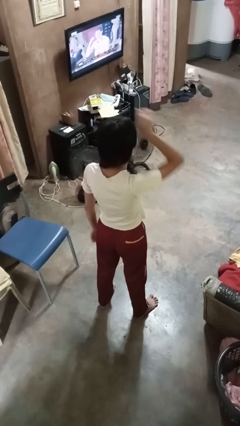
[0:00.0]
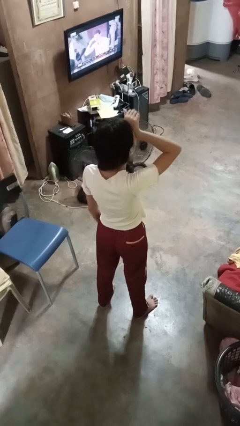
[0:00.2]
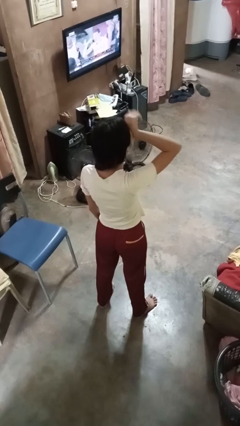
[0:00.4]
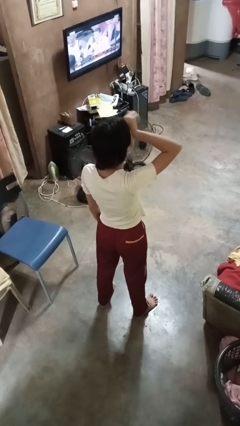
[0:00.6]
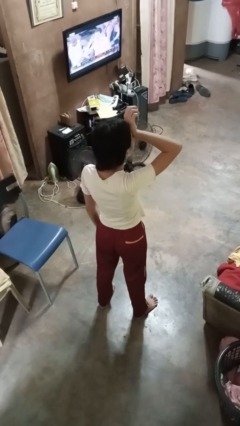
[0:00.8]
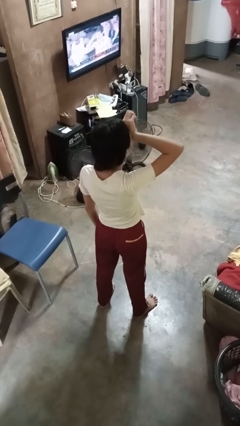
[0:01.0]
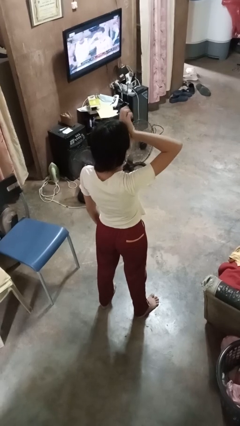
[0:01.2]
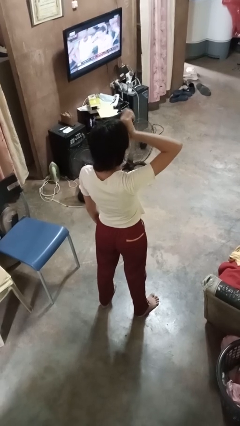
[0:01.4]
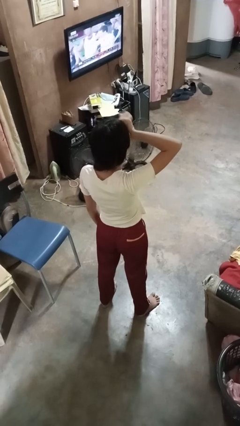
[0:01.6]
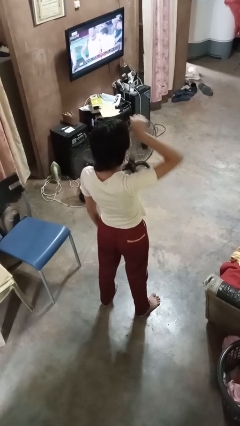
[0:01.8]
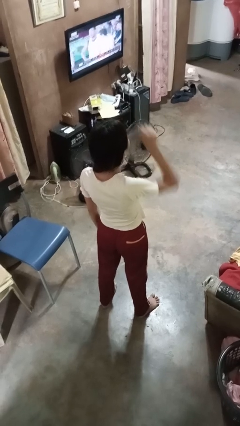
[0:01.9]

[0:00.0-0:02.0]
person rubs eyes

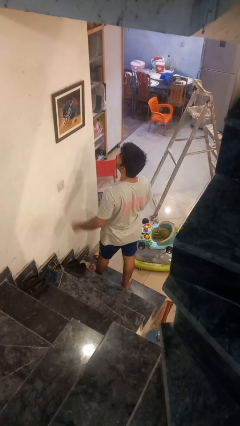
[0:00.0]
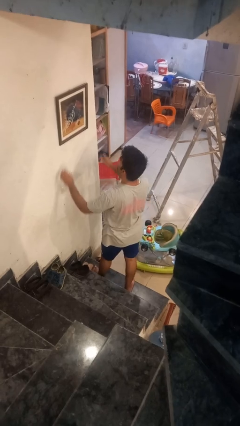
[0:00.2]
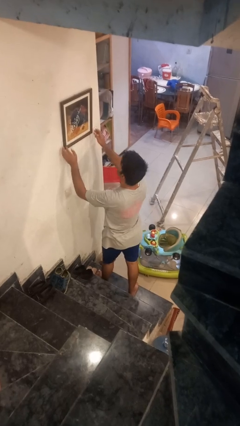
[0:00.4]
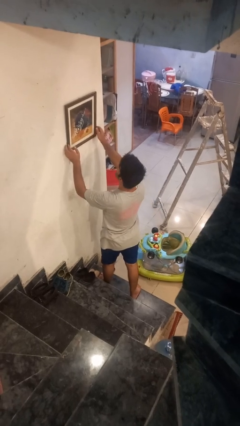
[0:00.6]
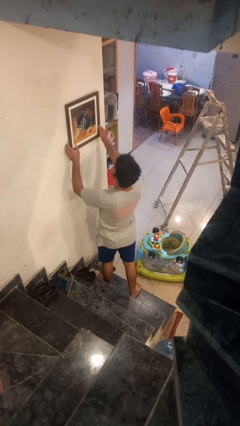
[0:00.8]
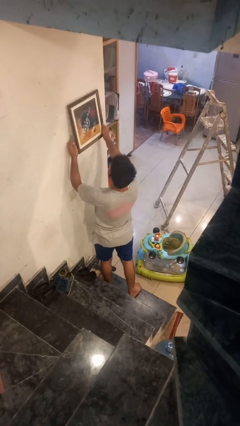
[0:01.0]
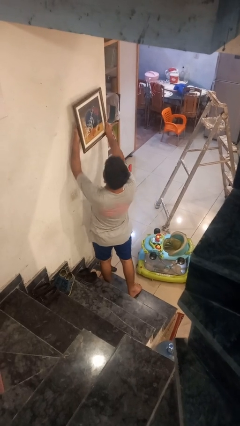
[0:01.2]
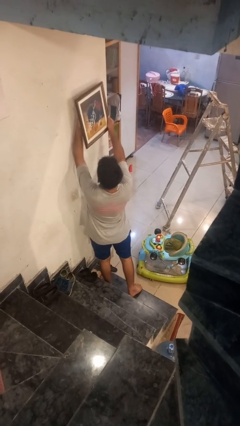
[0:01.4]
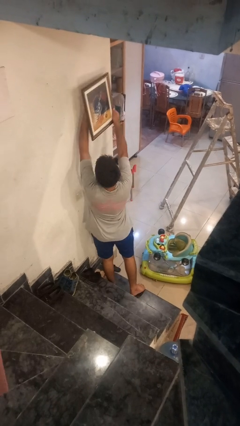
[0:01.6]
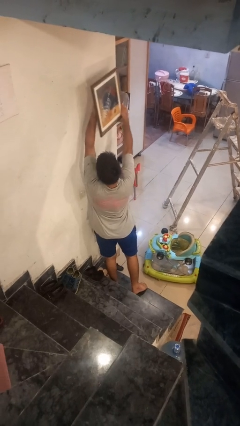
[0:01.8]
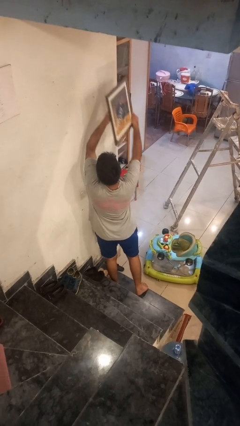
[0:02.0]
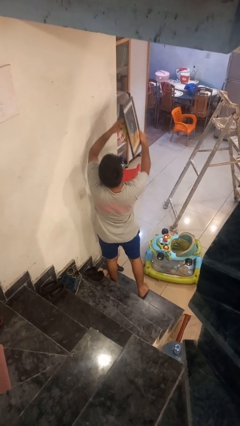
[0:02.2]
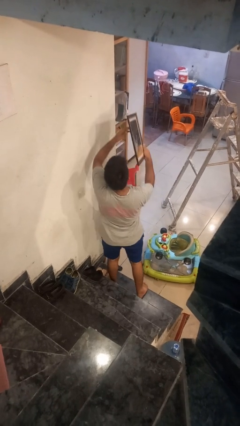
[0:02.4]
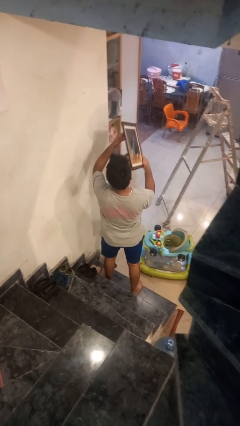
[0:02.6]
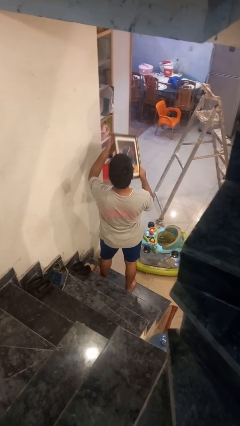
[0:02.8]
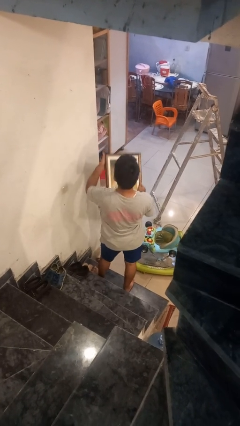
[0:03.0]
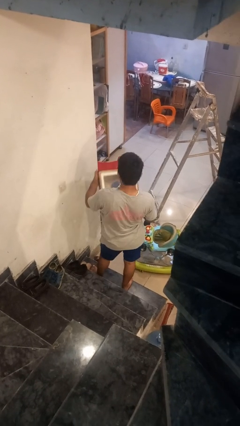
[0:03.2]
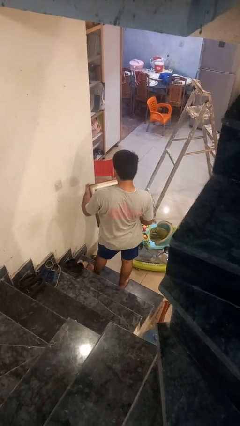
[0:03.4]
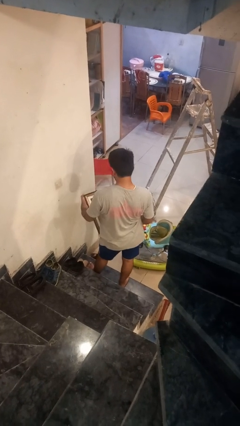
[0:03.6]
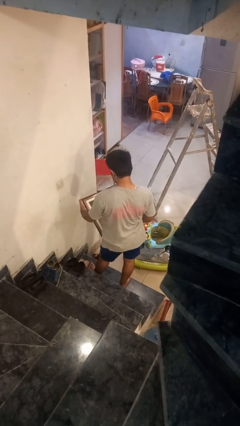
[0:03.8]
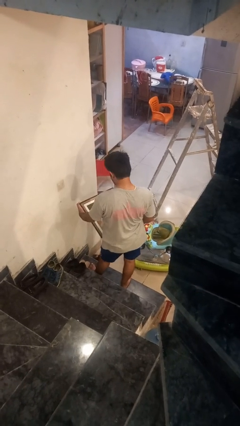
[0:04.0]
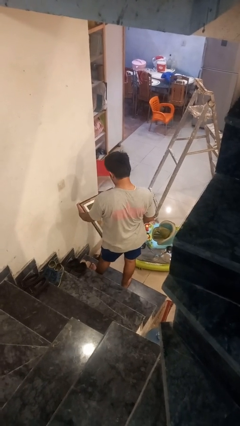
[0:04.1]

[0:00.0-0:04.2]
person takes down picture frame

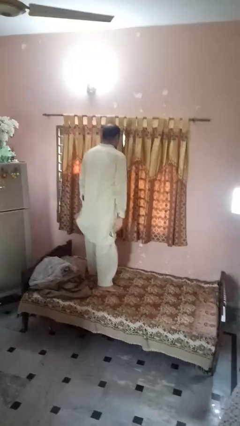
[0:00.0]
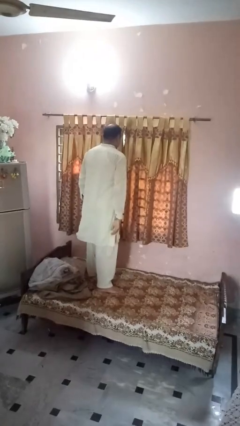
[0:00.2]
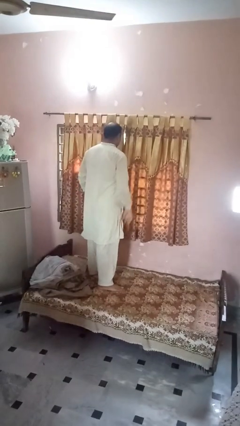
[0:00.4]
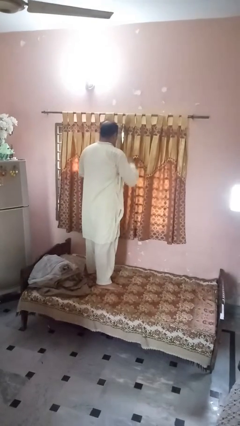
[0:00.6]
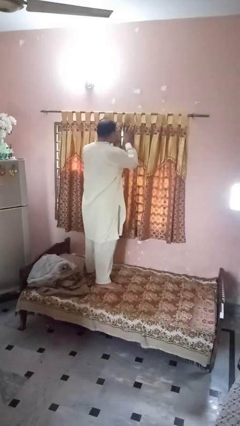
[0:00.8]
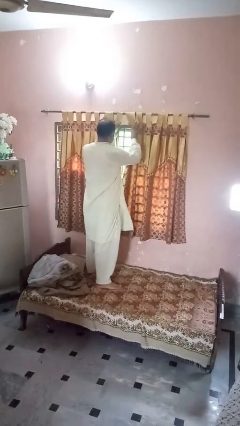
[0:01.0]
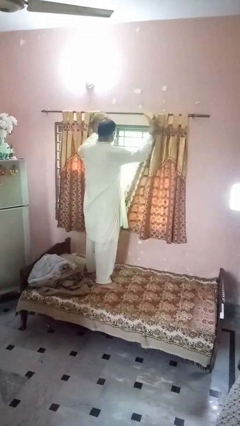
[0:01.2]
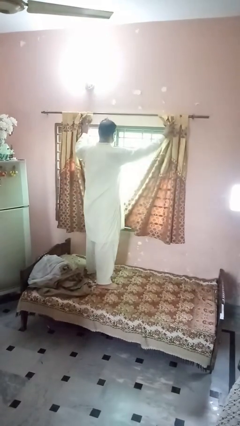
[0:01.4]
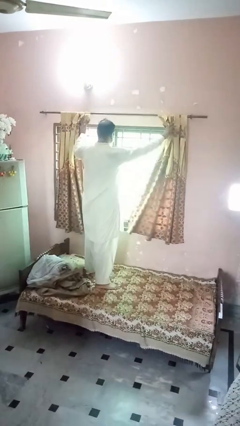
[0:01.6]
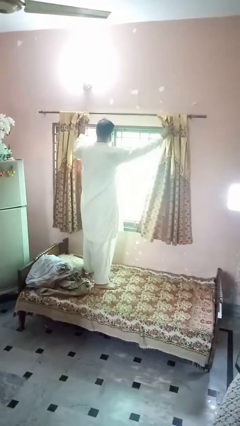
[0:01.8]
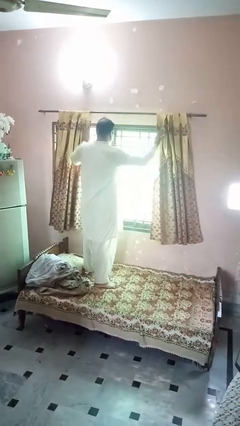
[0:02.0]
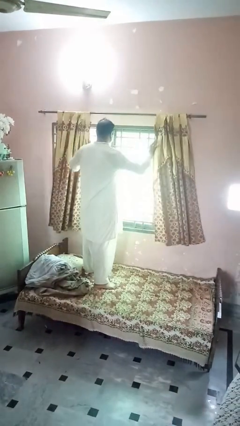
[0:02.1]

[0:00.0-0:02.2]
person opens curtains

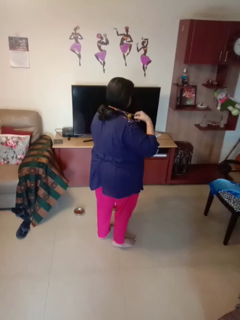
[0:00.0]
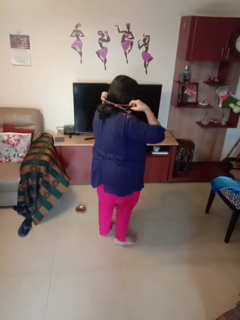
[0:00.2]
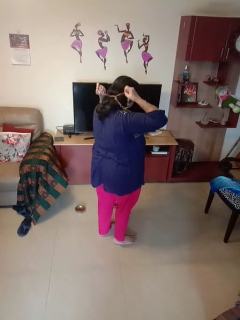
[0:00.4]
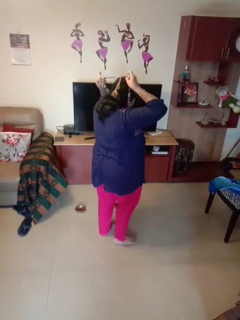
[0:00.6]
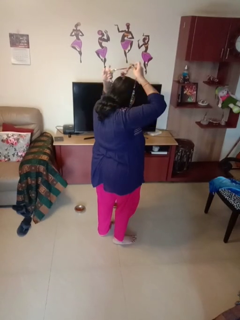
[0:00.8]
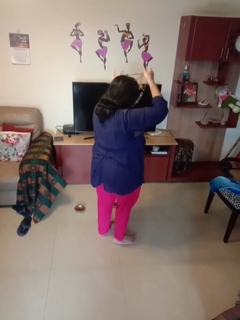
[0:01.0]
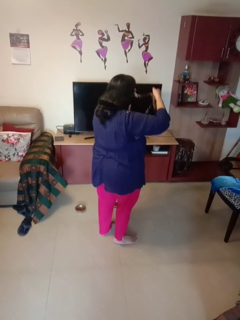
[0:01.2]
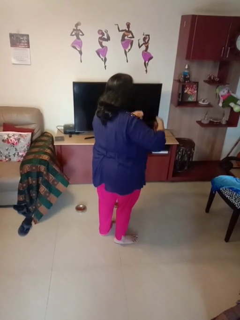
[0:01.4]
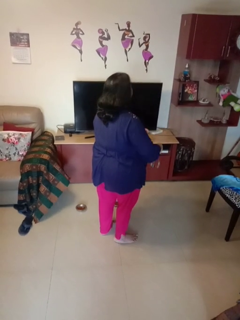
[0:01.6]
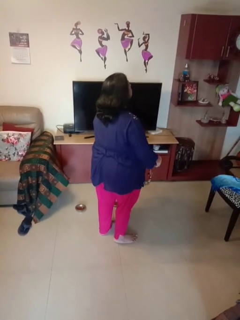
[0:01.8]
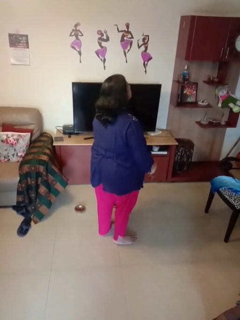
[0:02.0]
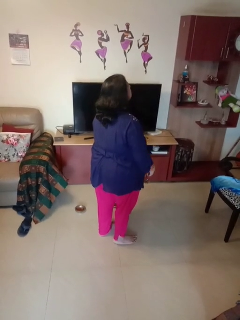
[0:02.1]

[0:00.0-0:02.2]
person takes off necklace

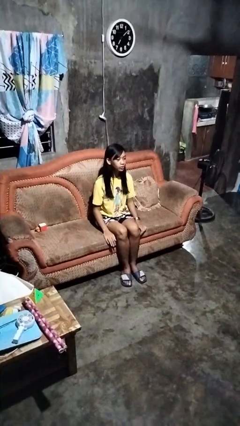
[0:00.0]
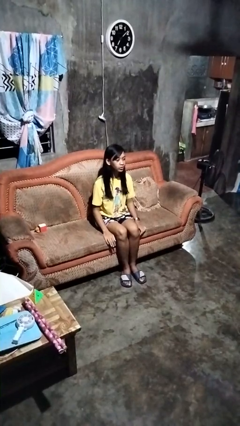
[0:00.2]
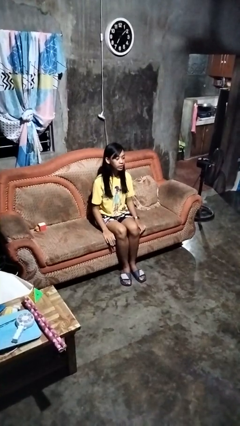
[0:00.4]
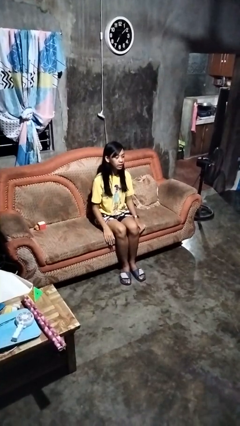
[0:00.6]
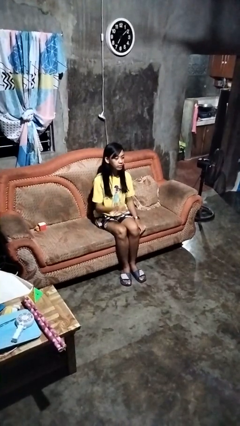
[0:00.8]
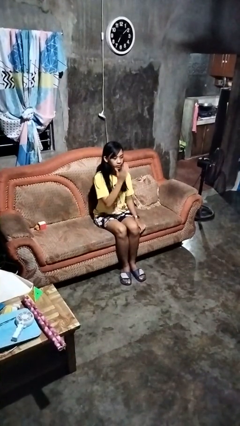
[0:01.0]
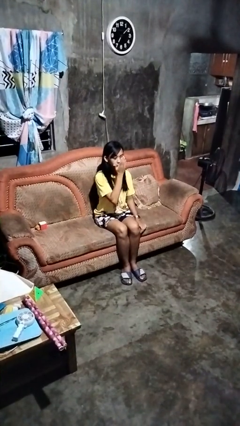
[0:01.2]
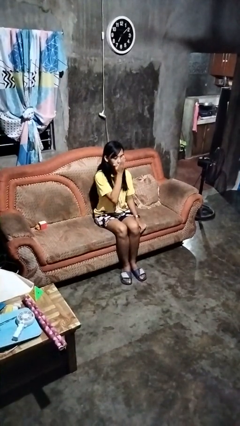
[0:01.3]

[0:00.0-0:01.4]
person gestures blow kiss

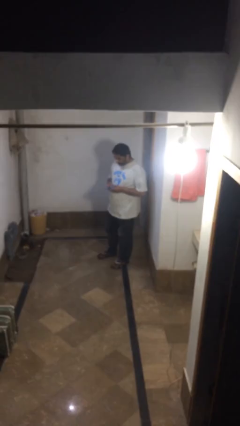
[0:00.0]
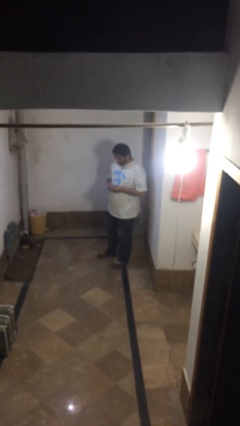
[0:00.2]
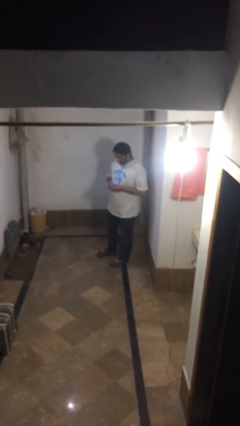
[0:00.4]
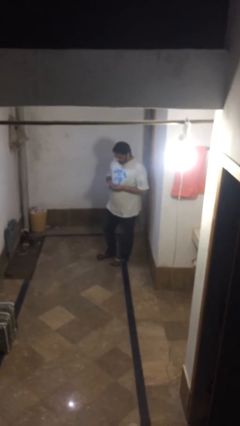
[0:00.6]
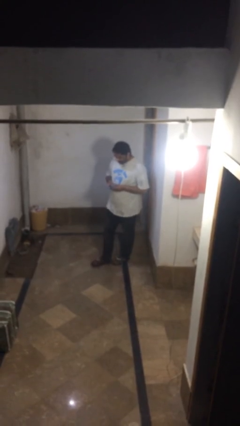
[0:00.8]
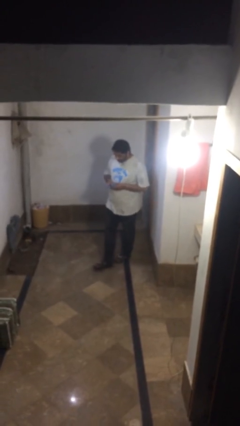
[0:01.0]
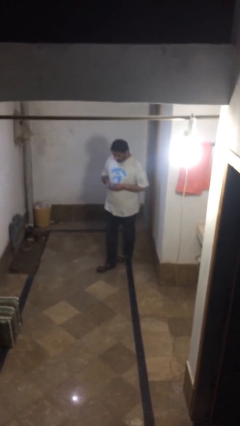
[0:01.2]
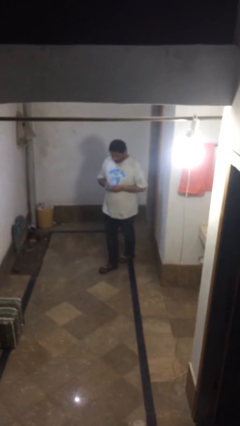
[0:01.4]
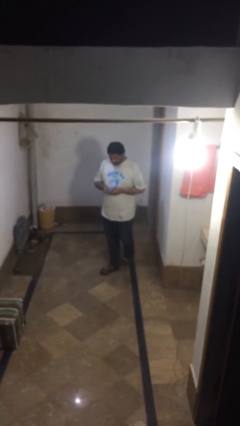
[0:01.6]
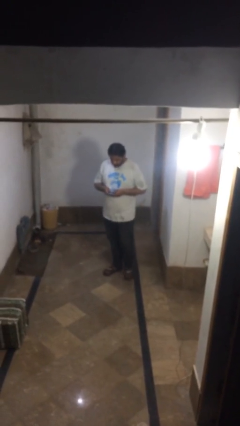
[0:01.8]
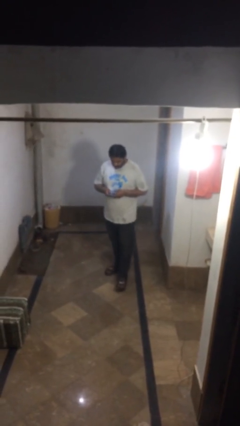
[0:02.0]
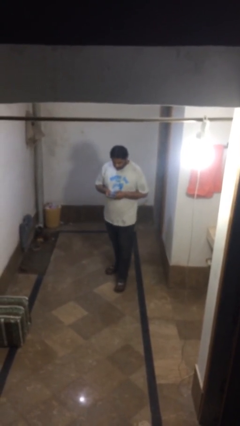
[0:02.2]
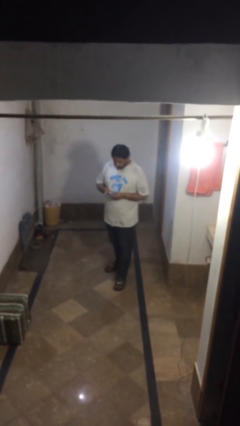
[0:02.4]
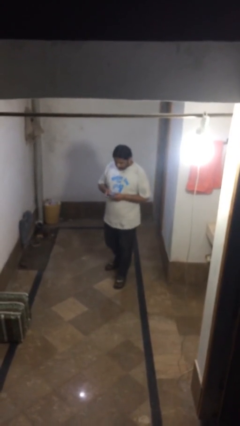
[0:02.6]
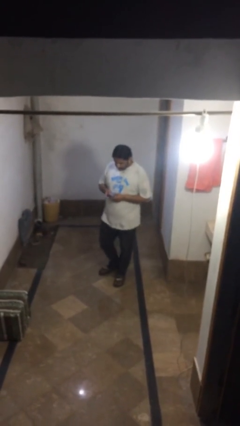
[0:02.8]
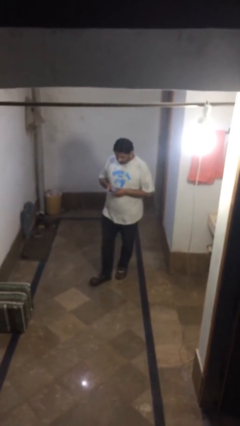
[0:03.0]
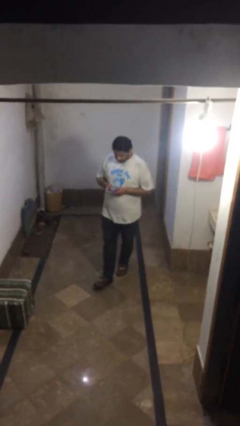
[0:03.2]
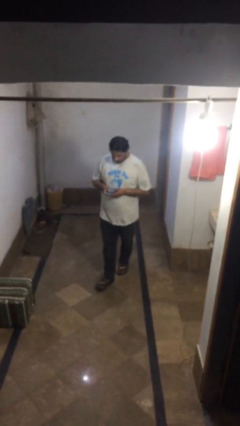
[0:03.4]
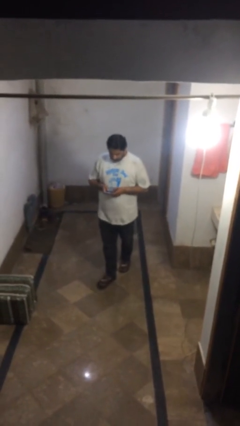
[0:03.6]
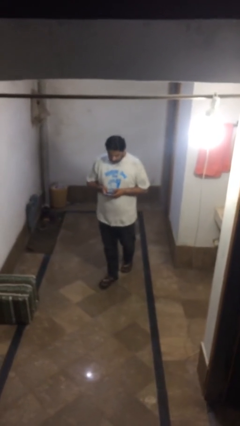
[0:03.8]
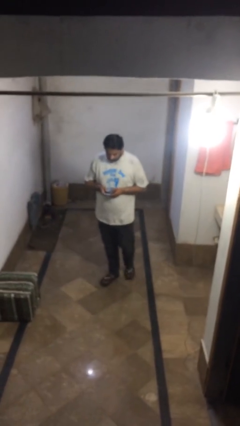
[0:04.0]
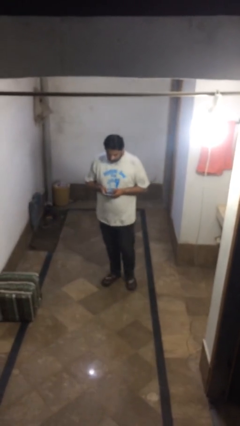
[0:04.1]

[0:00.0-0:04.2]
person texts on phone

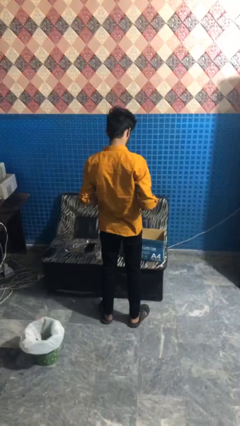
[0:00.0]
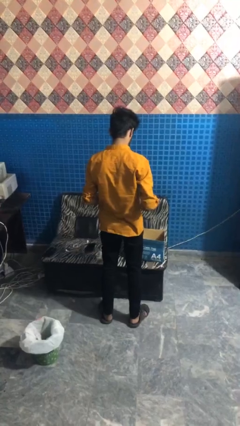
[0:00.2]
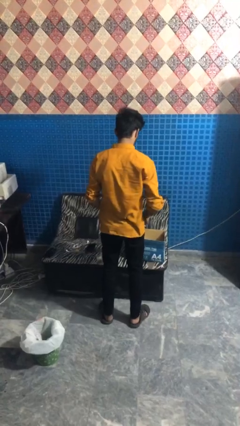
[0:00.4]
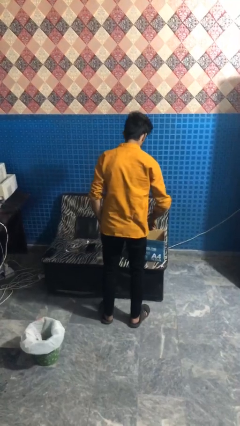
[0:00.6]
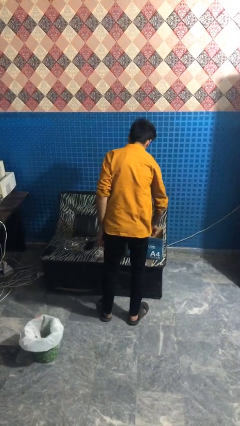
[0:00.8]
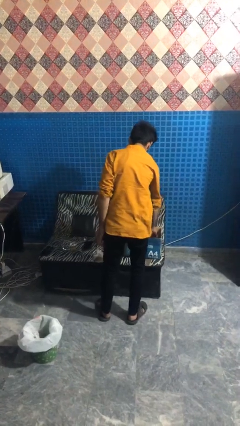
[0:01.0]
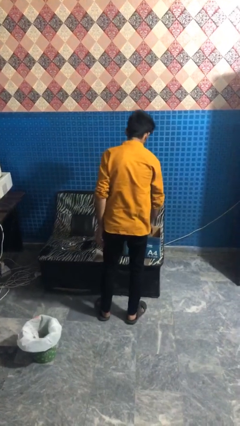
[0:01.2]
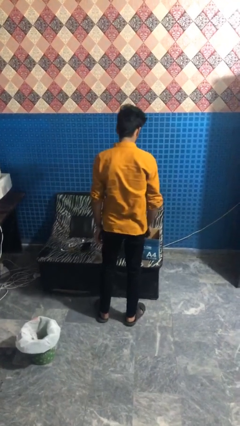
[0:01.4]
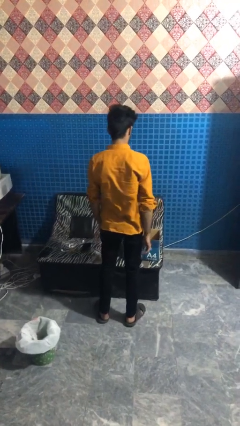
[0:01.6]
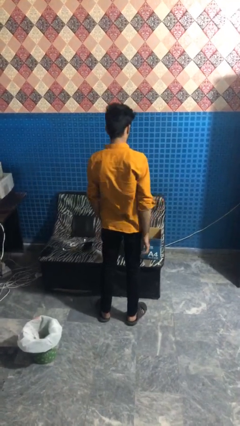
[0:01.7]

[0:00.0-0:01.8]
person puts object into box
